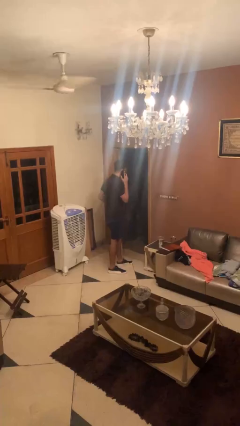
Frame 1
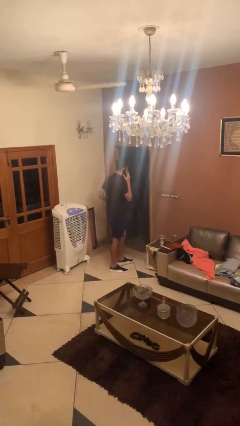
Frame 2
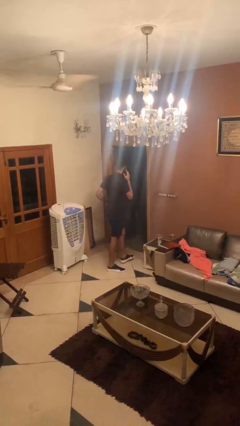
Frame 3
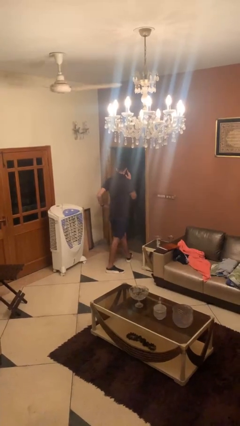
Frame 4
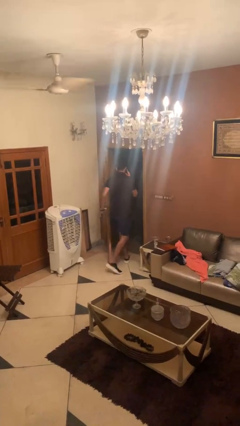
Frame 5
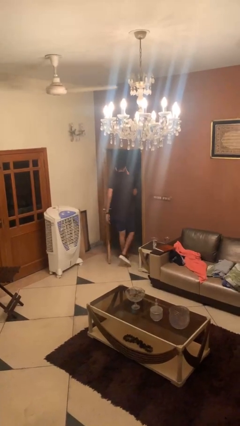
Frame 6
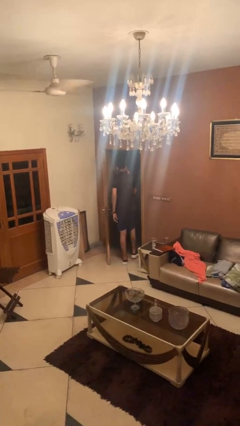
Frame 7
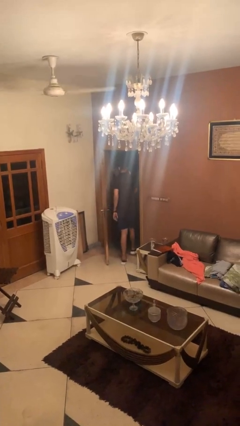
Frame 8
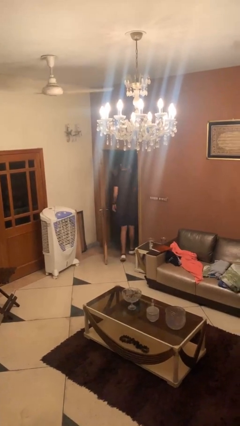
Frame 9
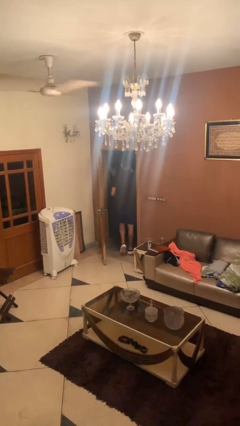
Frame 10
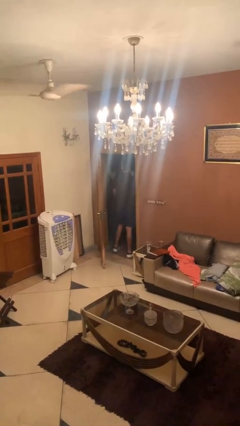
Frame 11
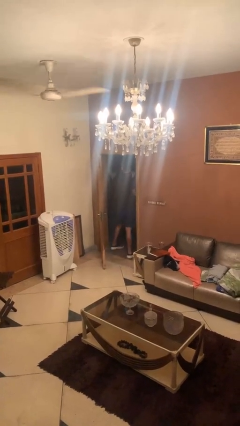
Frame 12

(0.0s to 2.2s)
person exits scene through structure

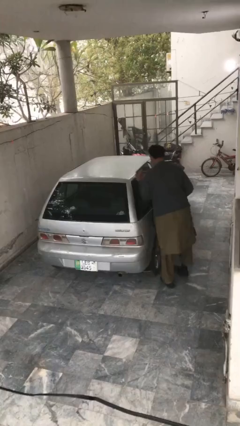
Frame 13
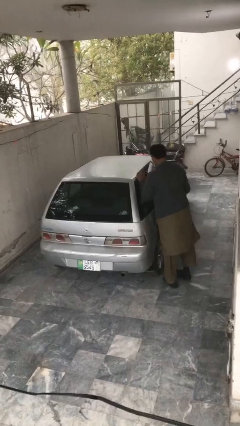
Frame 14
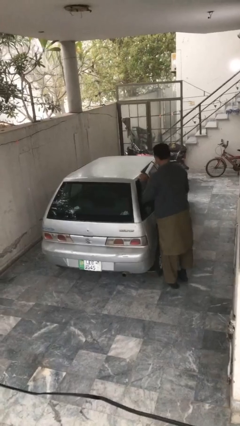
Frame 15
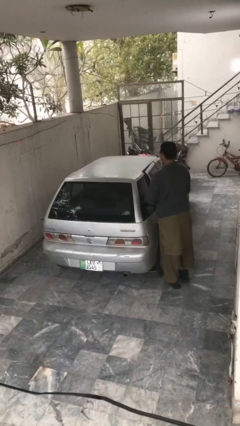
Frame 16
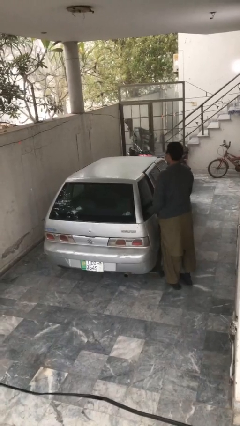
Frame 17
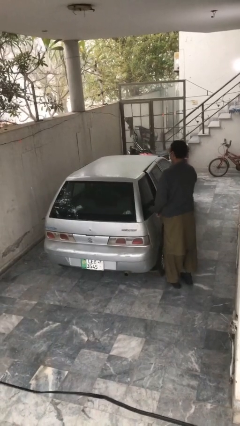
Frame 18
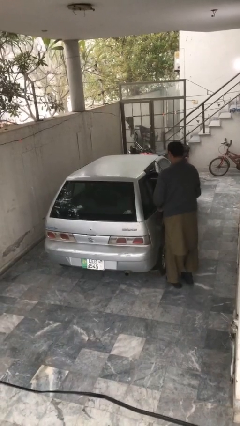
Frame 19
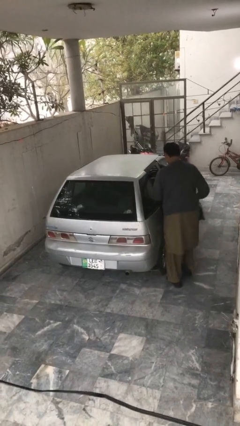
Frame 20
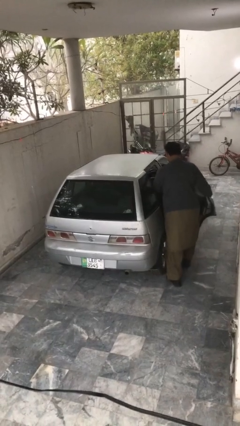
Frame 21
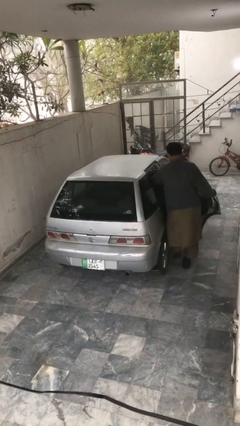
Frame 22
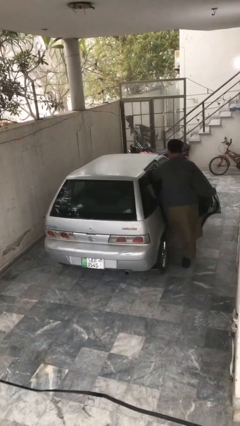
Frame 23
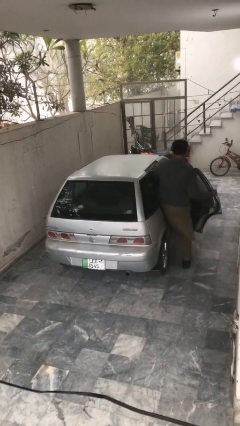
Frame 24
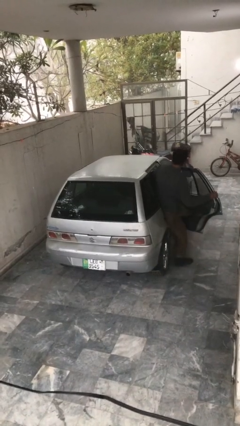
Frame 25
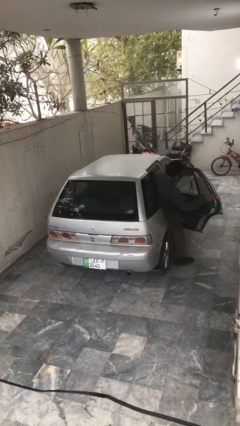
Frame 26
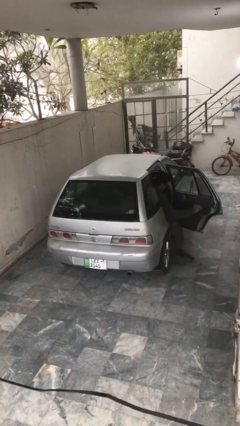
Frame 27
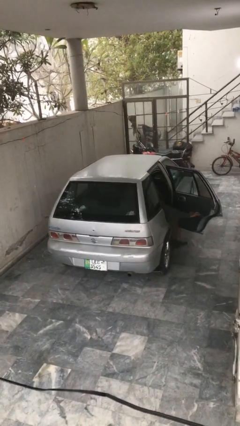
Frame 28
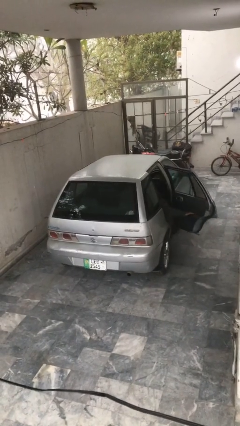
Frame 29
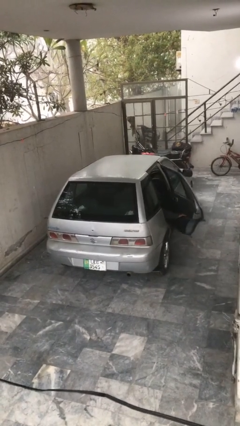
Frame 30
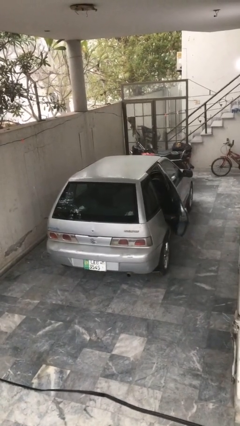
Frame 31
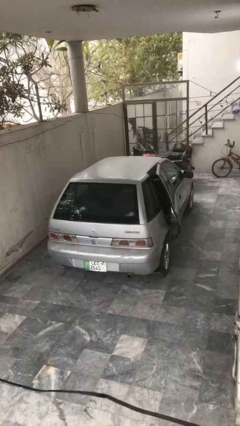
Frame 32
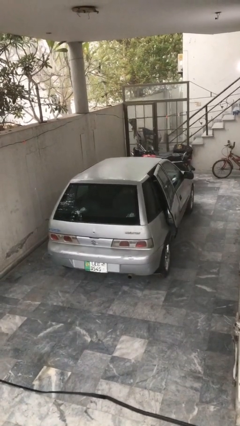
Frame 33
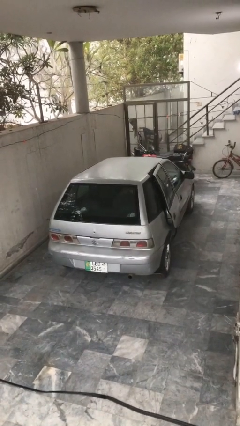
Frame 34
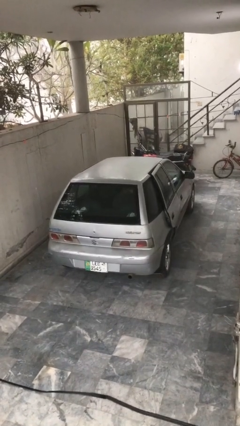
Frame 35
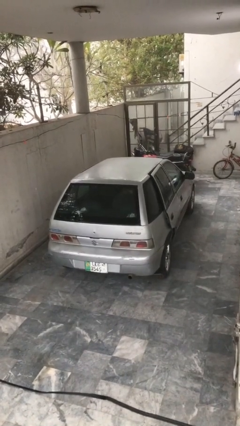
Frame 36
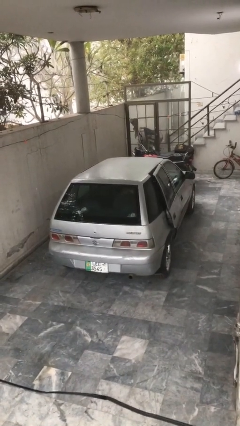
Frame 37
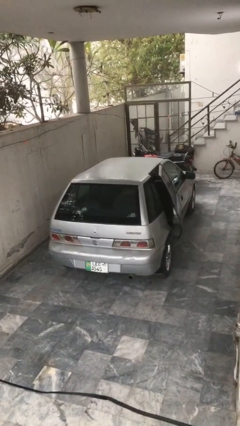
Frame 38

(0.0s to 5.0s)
car picks up person

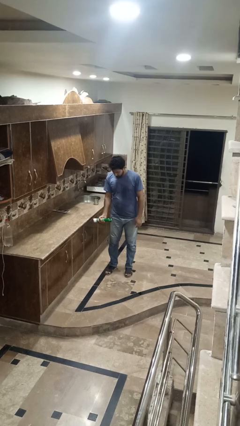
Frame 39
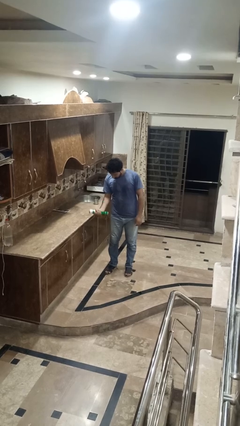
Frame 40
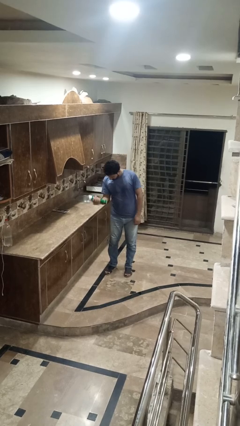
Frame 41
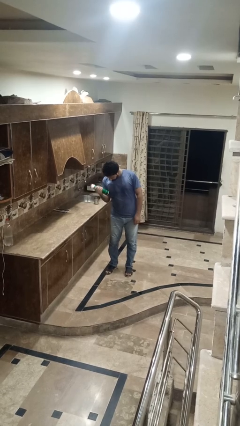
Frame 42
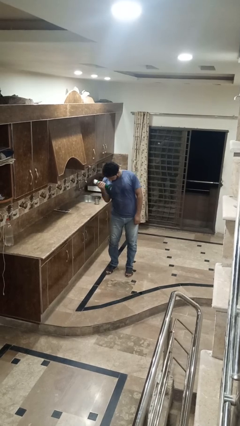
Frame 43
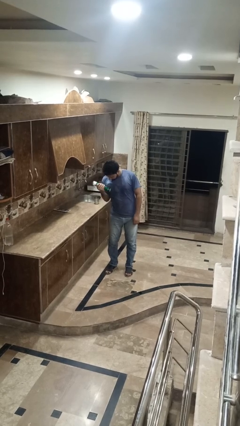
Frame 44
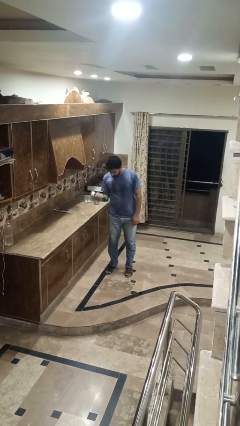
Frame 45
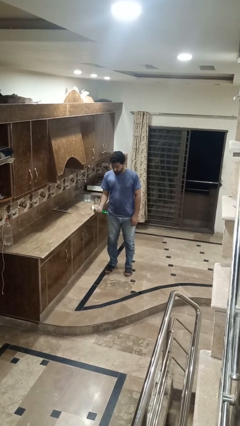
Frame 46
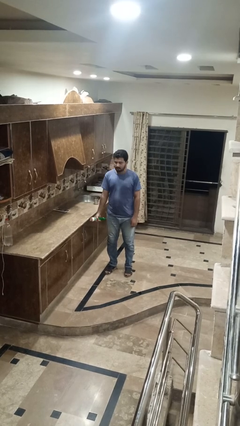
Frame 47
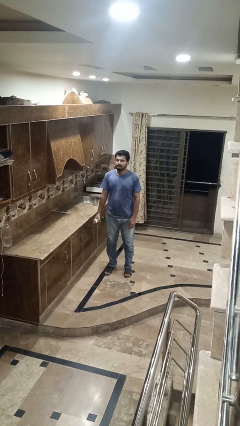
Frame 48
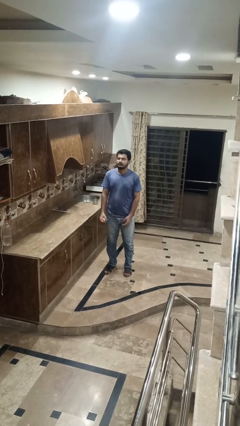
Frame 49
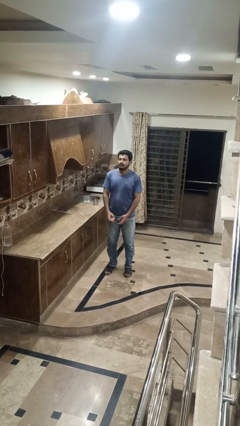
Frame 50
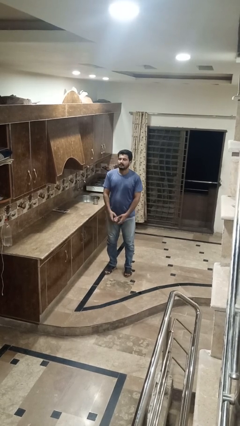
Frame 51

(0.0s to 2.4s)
person lifts dumbbells

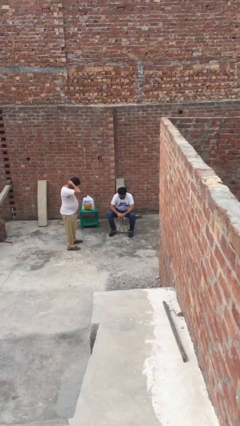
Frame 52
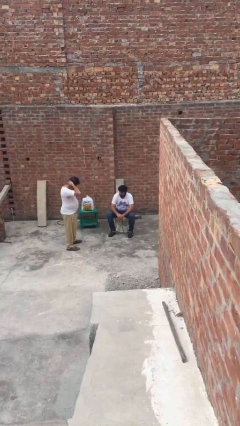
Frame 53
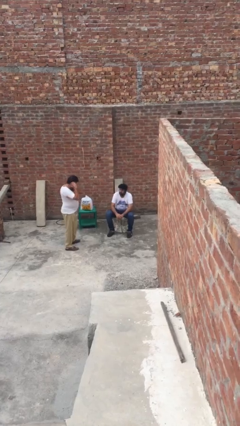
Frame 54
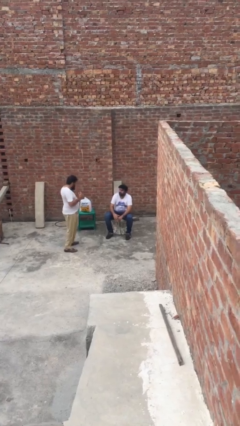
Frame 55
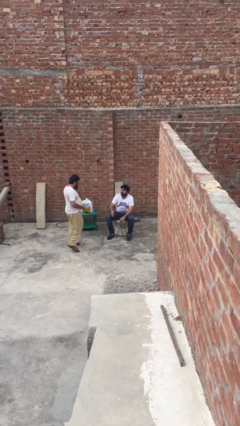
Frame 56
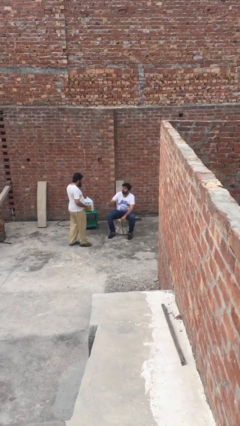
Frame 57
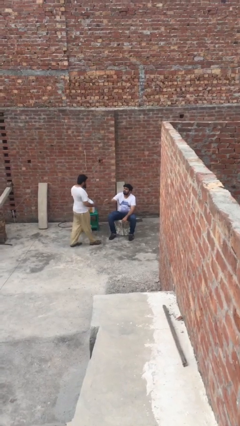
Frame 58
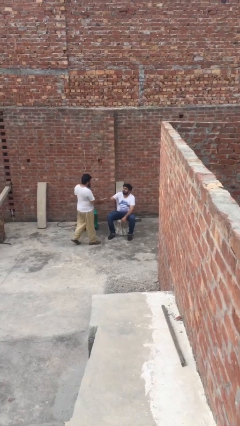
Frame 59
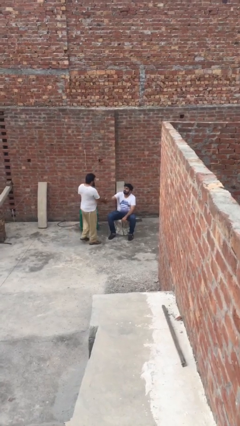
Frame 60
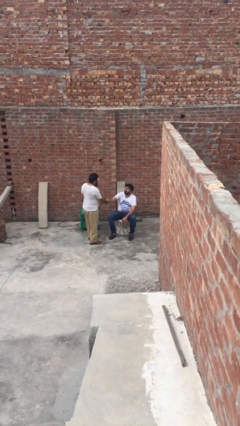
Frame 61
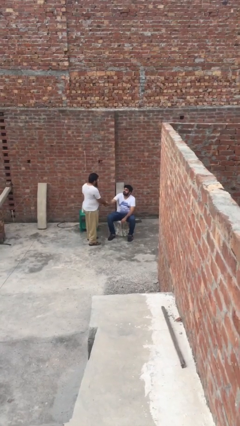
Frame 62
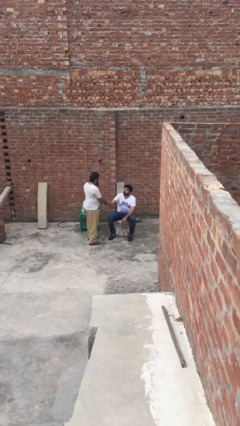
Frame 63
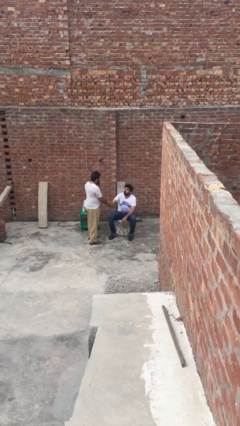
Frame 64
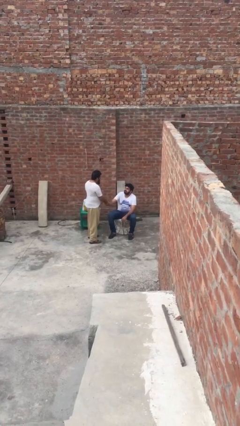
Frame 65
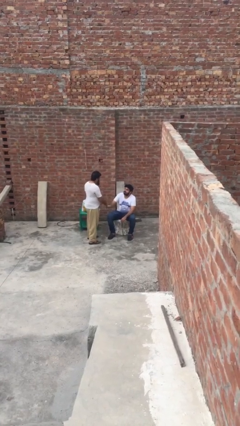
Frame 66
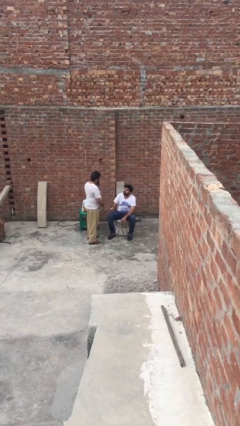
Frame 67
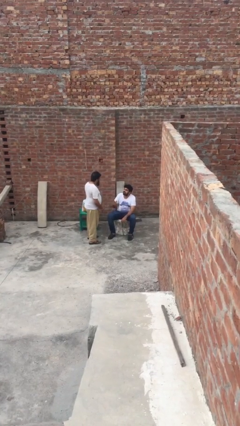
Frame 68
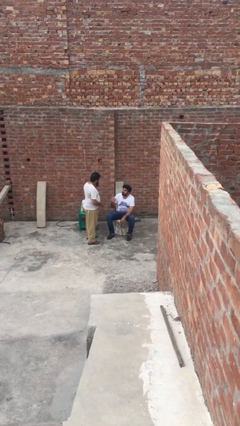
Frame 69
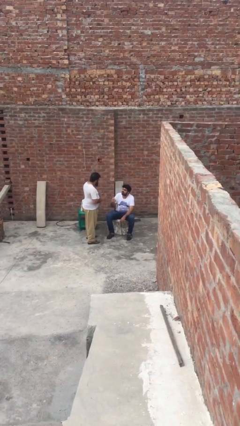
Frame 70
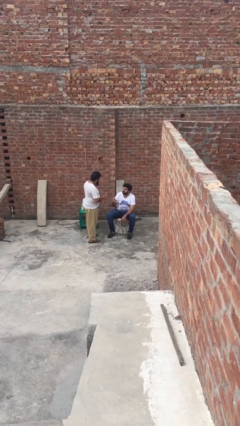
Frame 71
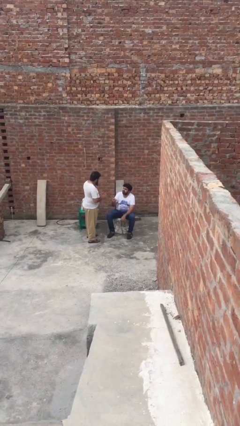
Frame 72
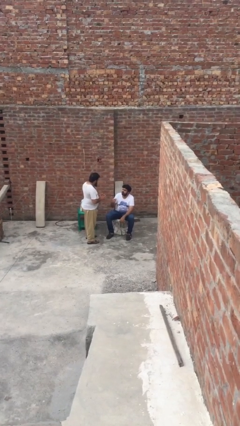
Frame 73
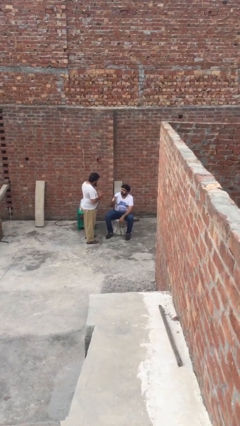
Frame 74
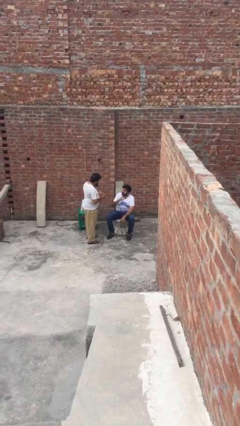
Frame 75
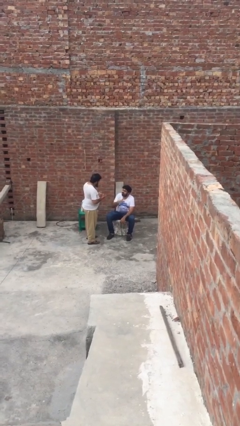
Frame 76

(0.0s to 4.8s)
person shakes hand

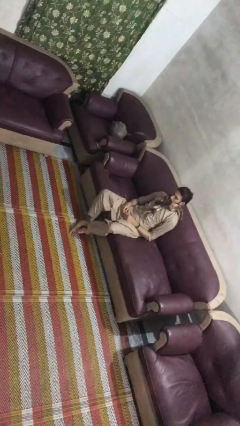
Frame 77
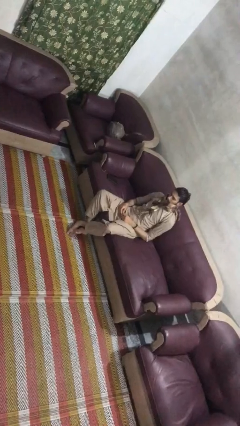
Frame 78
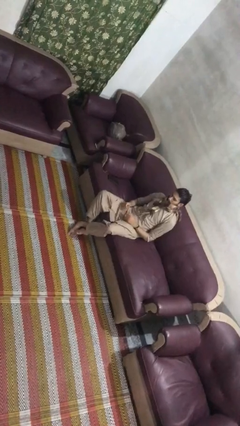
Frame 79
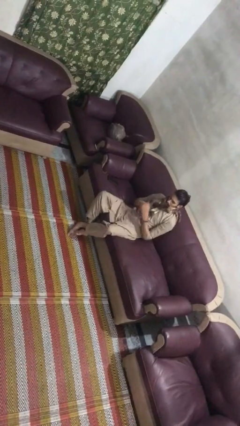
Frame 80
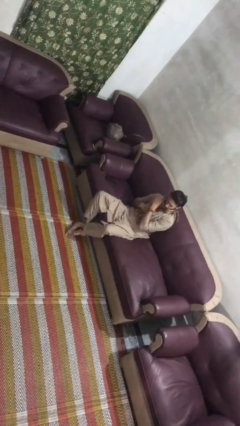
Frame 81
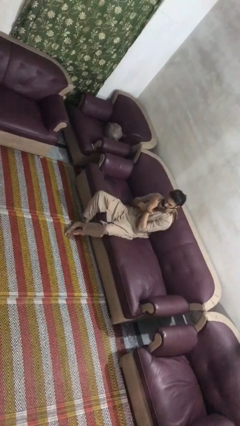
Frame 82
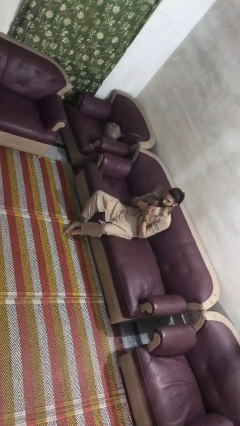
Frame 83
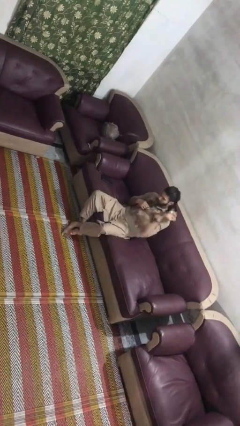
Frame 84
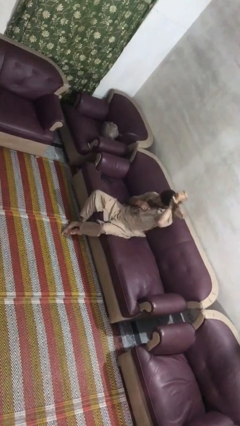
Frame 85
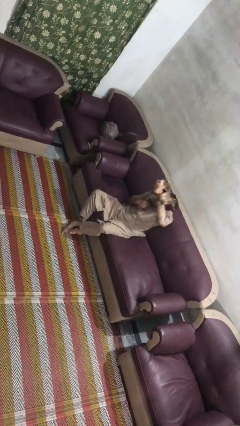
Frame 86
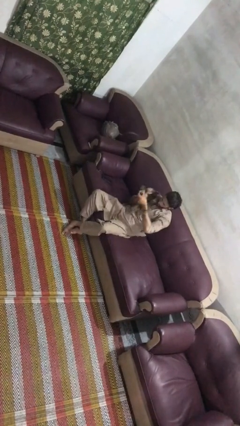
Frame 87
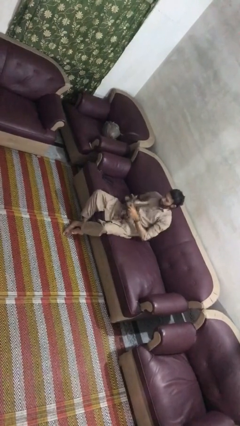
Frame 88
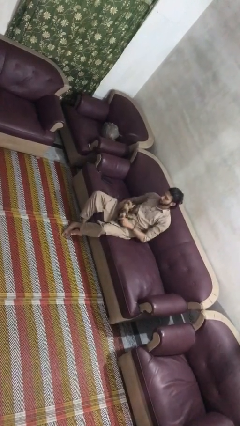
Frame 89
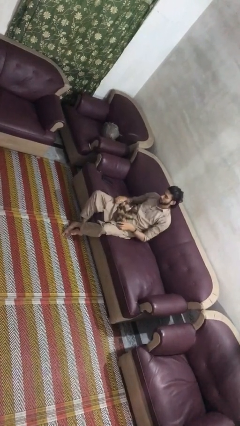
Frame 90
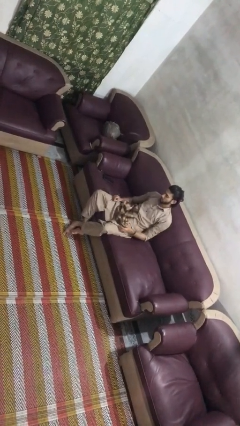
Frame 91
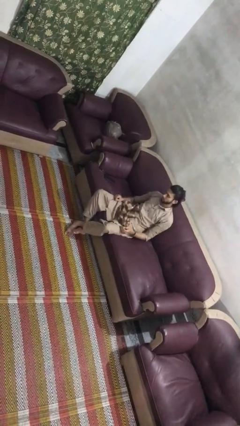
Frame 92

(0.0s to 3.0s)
person takes off scarf

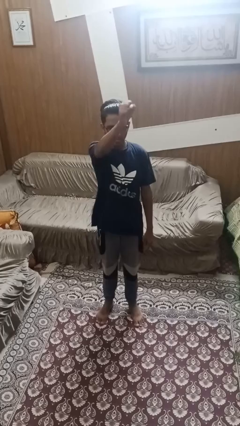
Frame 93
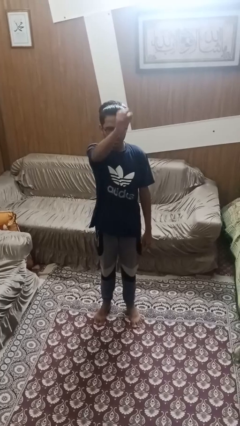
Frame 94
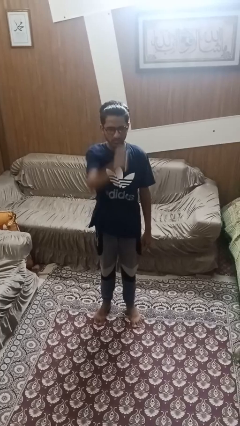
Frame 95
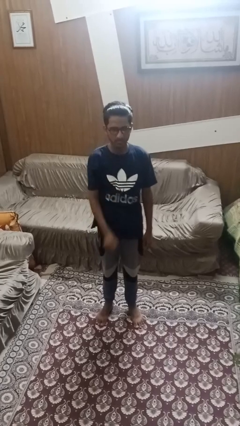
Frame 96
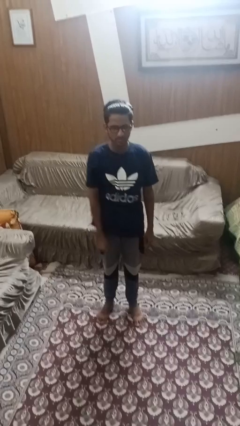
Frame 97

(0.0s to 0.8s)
person punches
